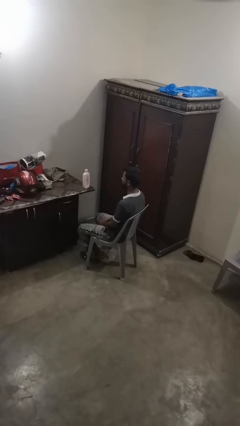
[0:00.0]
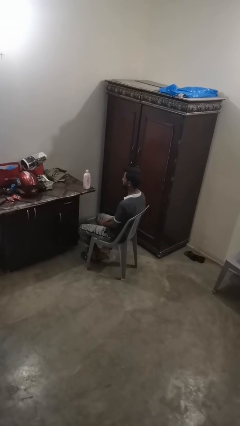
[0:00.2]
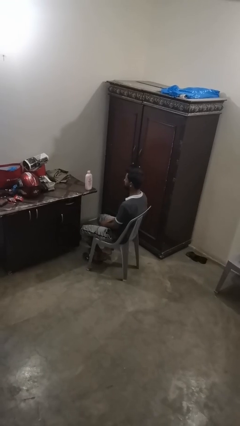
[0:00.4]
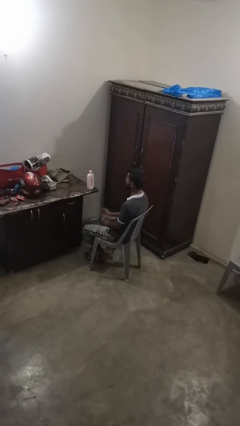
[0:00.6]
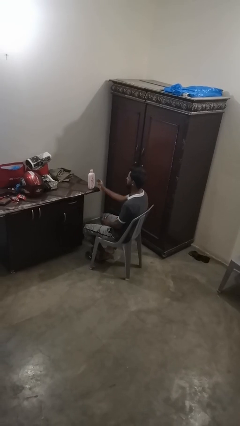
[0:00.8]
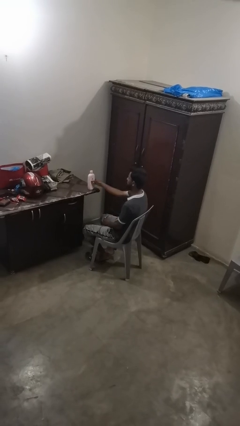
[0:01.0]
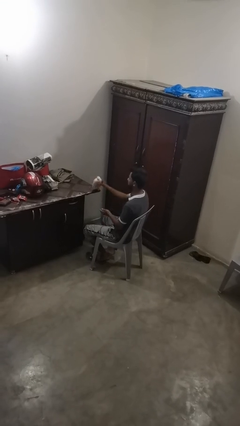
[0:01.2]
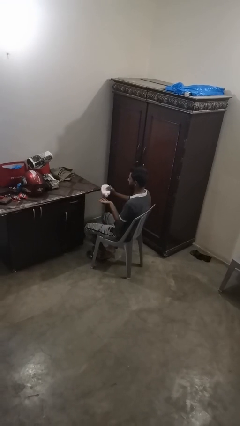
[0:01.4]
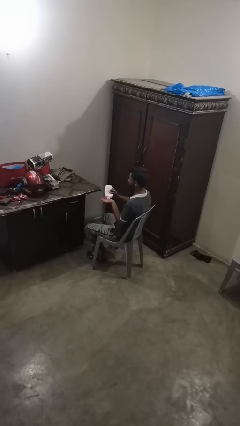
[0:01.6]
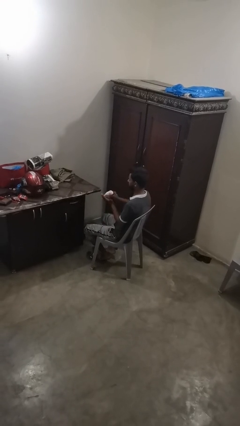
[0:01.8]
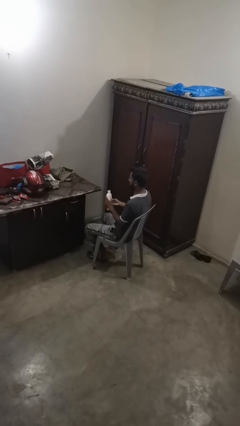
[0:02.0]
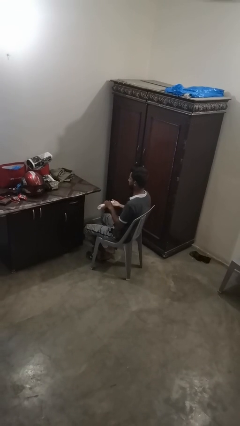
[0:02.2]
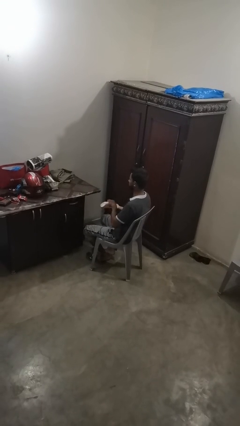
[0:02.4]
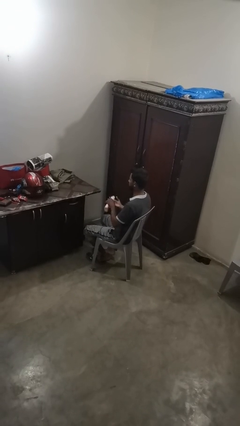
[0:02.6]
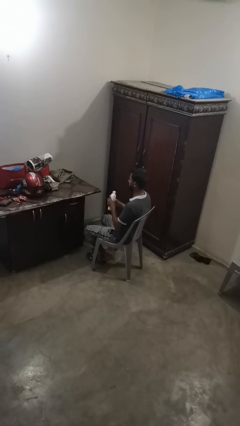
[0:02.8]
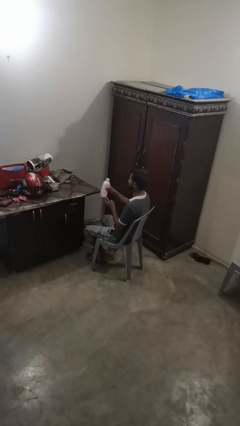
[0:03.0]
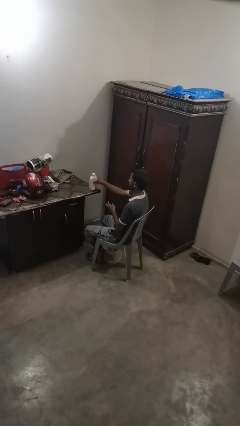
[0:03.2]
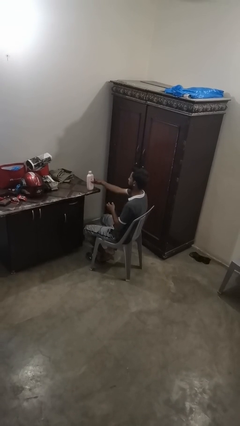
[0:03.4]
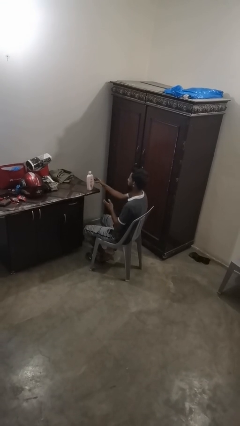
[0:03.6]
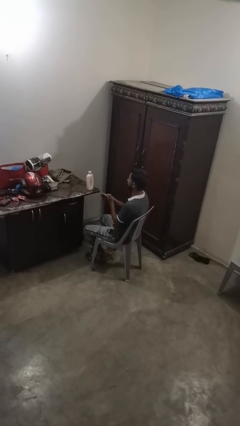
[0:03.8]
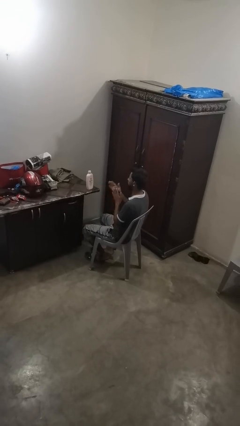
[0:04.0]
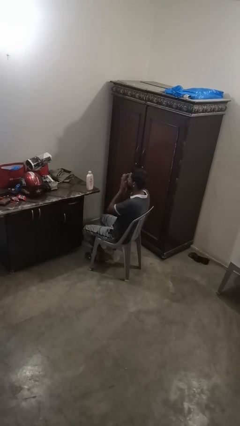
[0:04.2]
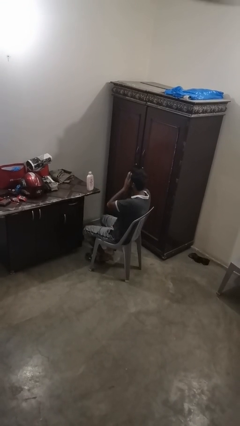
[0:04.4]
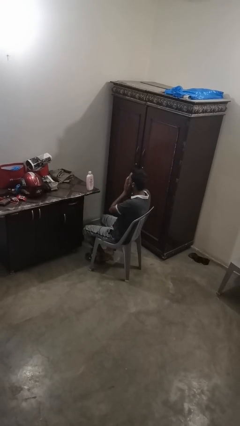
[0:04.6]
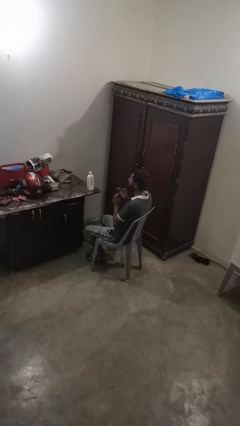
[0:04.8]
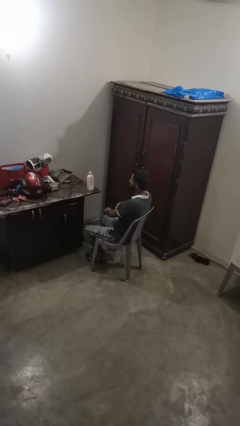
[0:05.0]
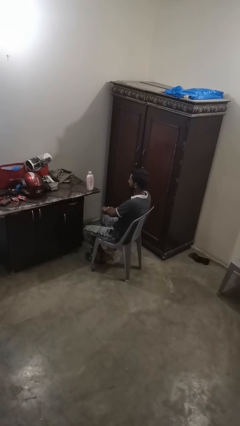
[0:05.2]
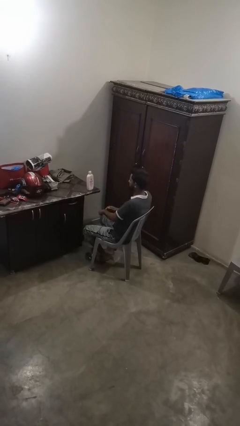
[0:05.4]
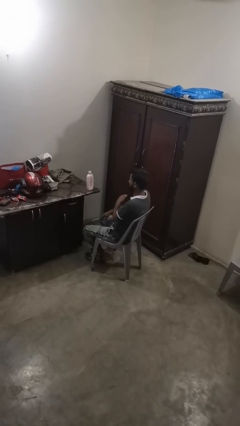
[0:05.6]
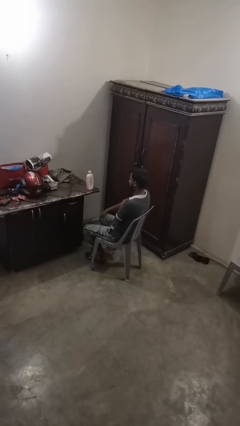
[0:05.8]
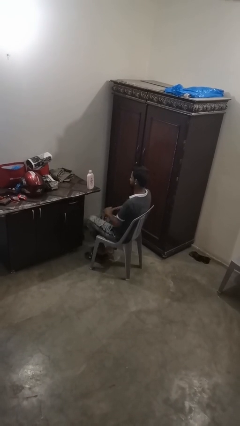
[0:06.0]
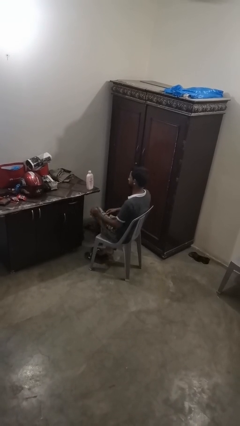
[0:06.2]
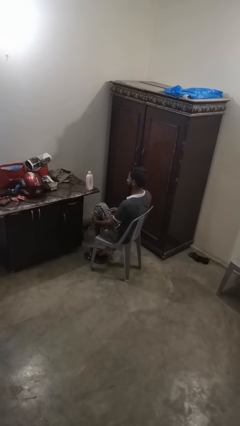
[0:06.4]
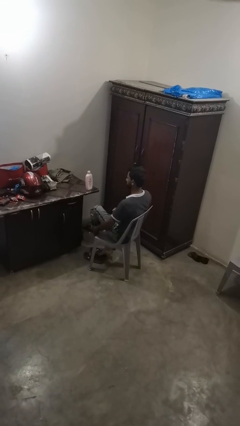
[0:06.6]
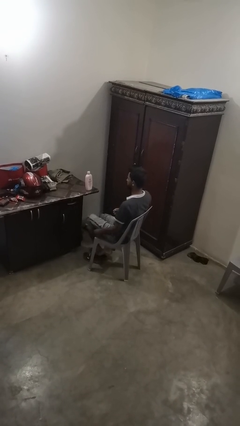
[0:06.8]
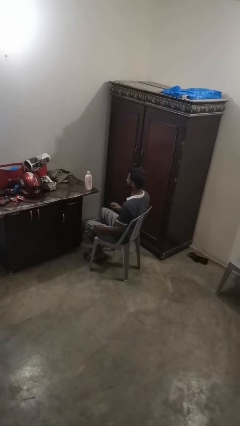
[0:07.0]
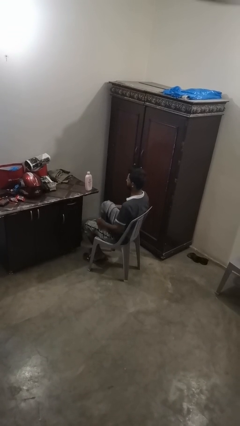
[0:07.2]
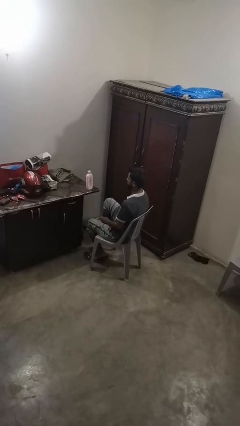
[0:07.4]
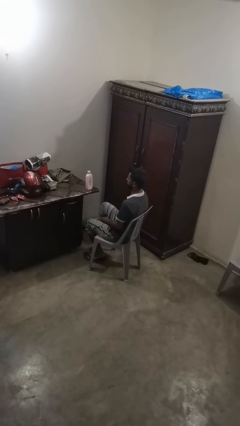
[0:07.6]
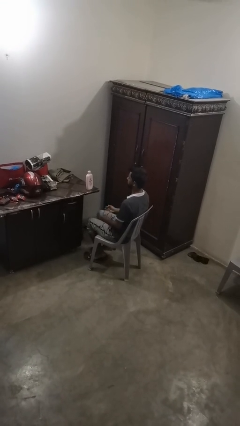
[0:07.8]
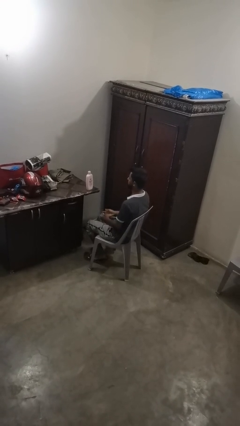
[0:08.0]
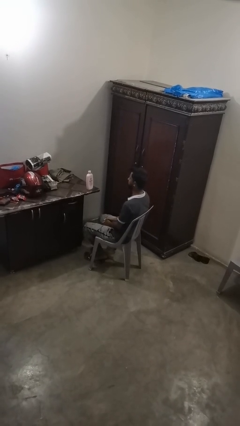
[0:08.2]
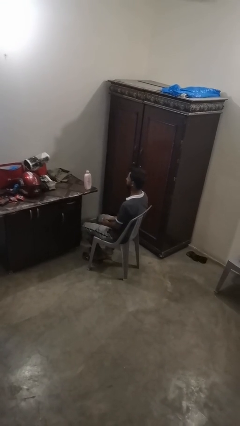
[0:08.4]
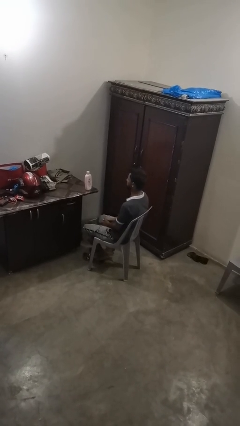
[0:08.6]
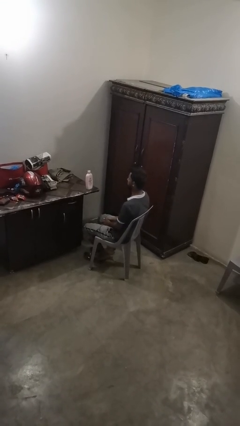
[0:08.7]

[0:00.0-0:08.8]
person applies sunscreen

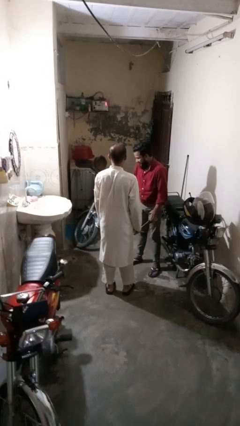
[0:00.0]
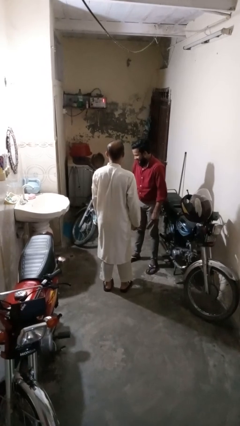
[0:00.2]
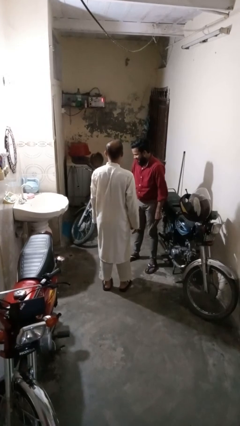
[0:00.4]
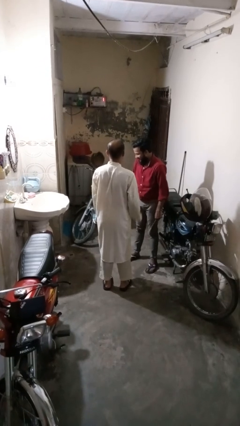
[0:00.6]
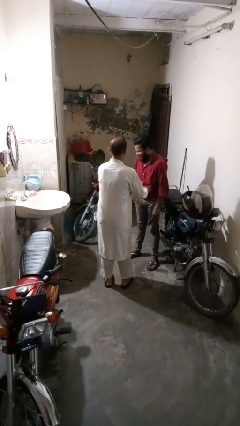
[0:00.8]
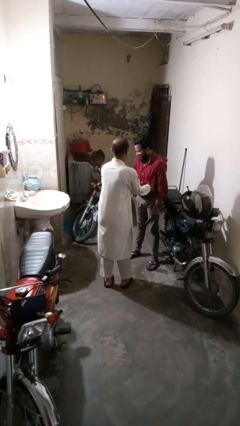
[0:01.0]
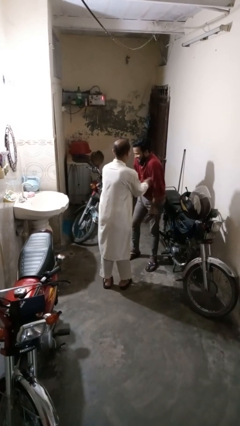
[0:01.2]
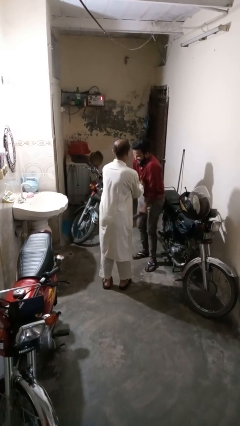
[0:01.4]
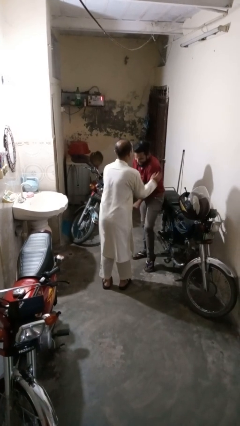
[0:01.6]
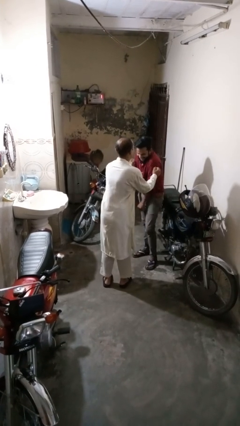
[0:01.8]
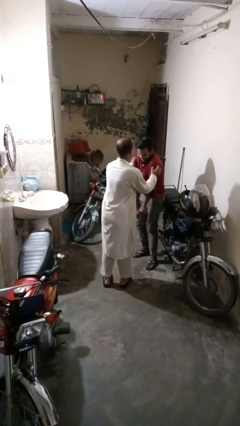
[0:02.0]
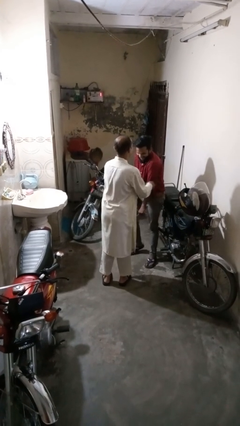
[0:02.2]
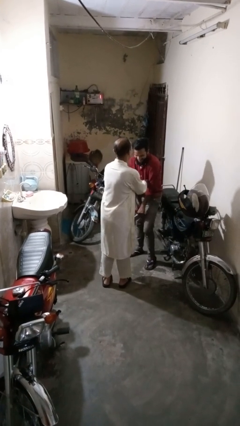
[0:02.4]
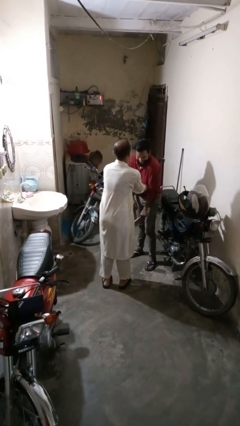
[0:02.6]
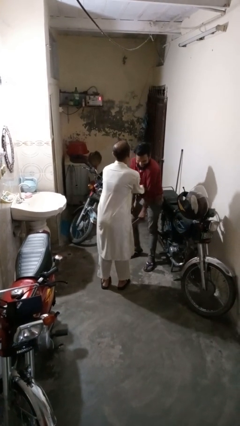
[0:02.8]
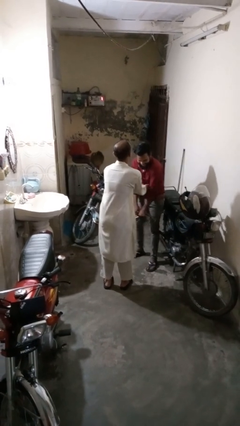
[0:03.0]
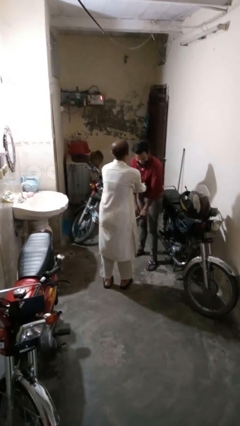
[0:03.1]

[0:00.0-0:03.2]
person tickles person

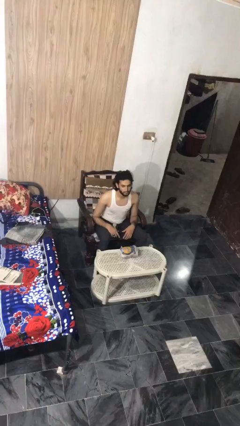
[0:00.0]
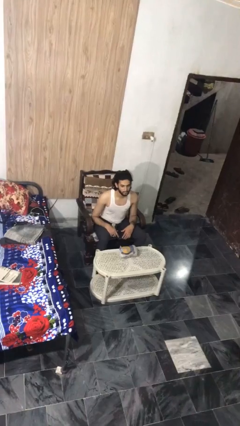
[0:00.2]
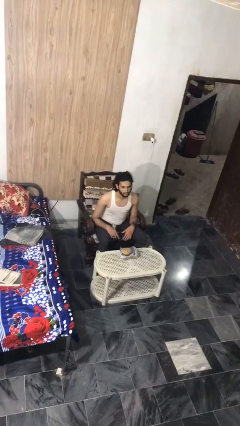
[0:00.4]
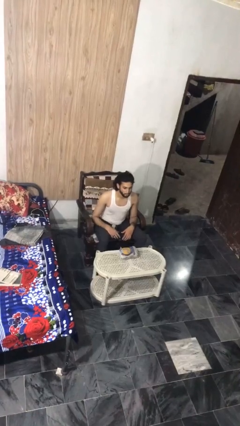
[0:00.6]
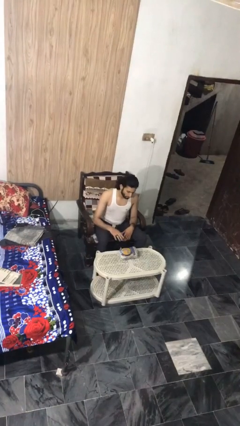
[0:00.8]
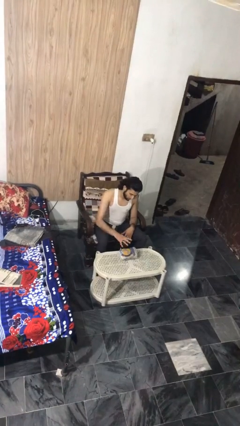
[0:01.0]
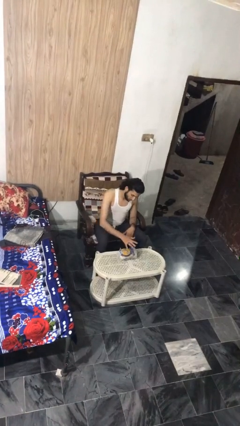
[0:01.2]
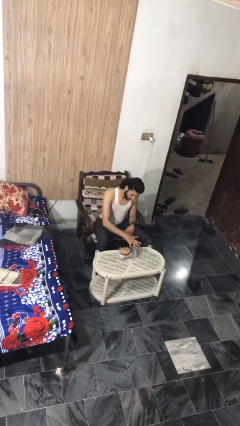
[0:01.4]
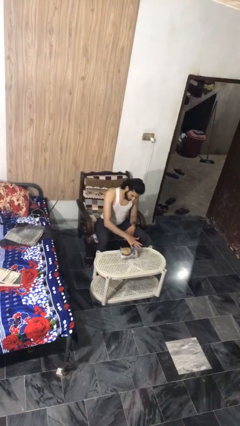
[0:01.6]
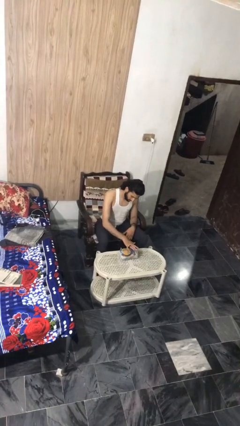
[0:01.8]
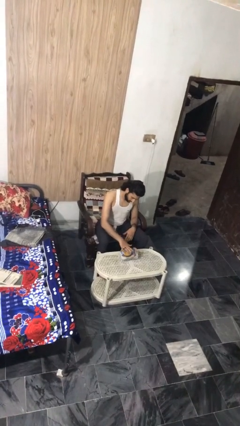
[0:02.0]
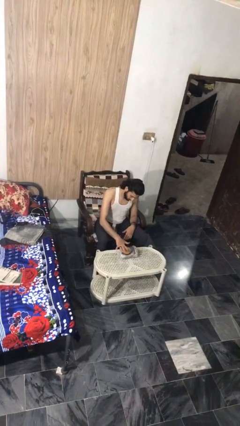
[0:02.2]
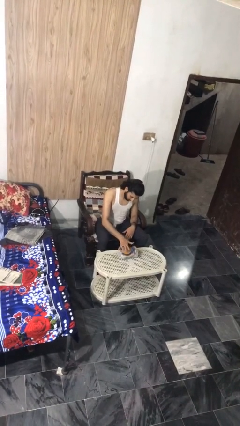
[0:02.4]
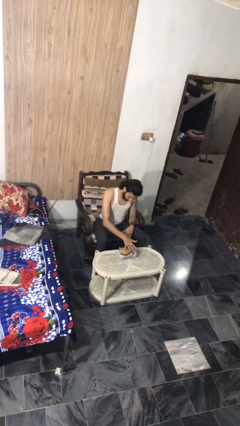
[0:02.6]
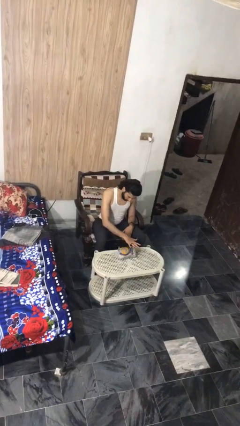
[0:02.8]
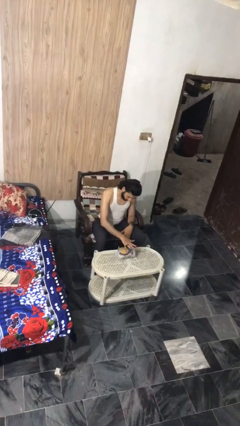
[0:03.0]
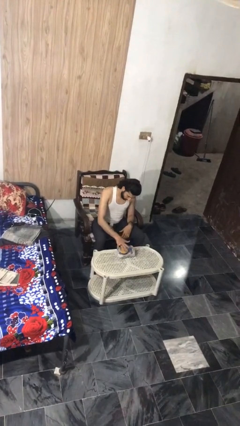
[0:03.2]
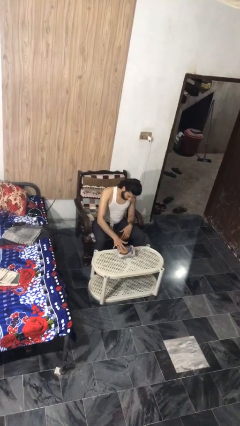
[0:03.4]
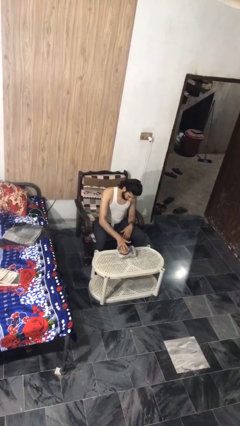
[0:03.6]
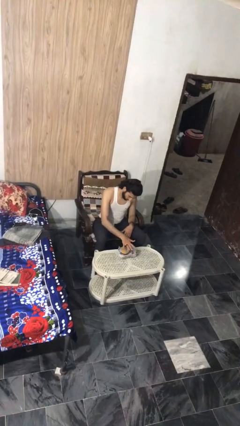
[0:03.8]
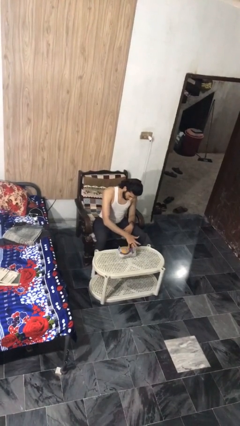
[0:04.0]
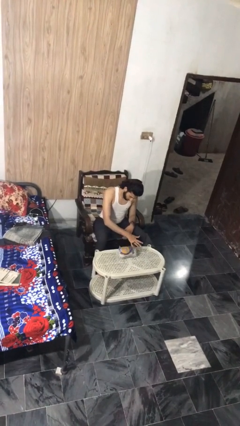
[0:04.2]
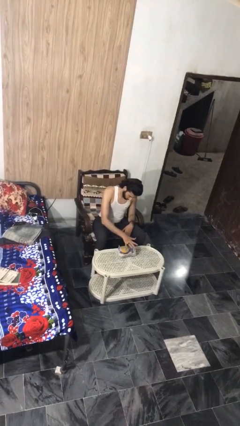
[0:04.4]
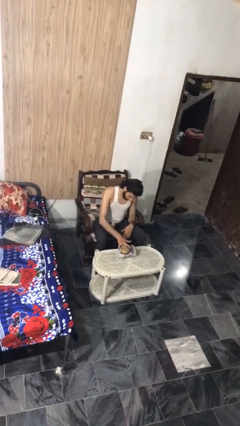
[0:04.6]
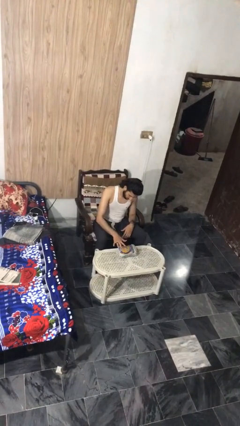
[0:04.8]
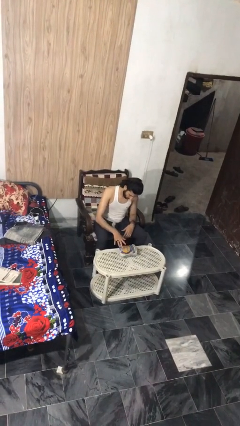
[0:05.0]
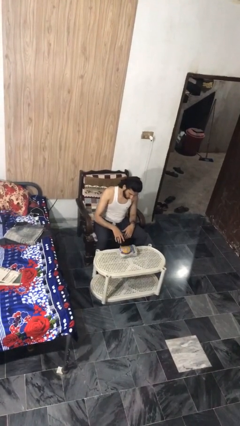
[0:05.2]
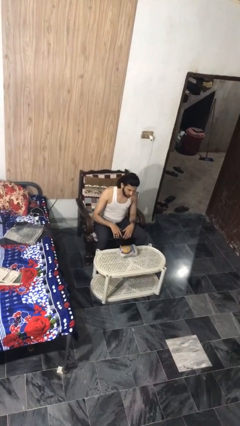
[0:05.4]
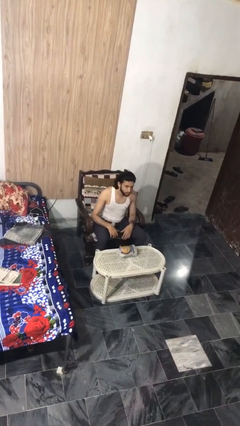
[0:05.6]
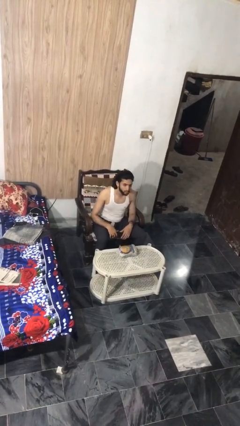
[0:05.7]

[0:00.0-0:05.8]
person waves hand over object
